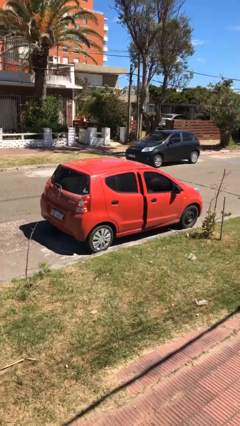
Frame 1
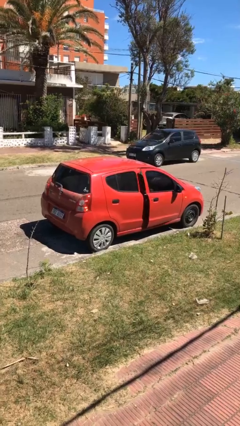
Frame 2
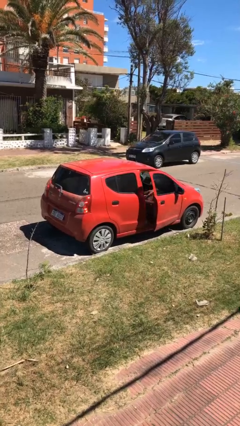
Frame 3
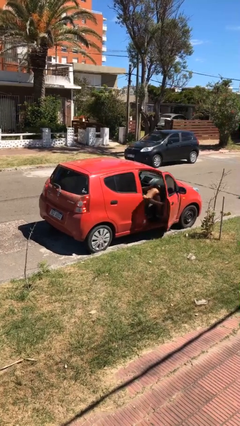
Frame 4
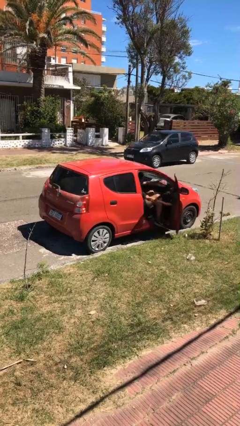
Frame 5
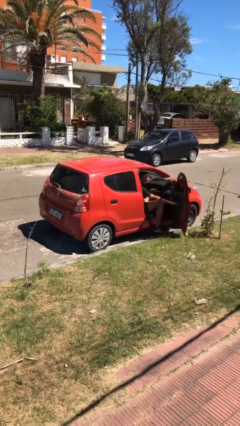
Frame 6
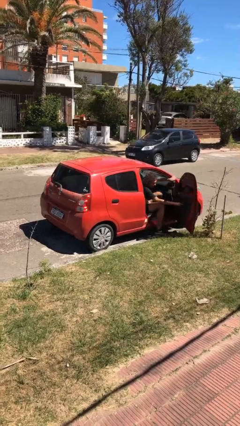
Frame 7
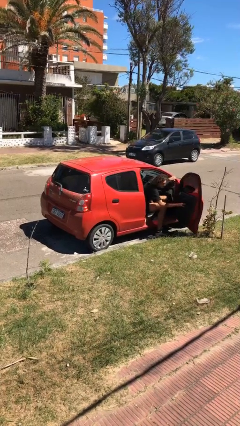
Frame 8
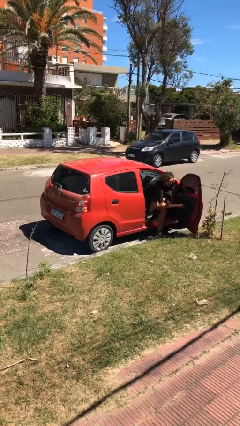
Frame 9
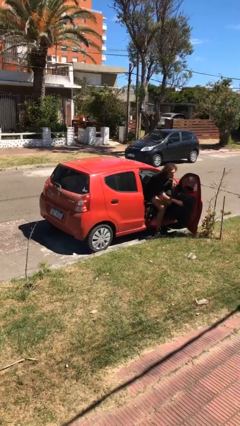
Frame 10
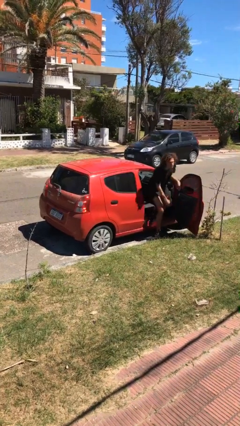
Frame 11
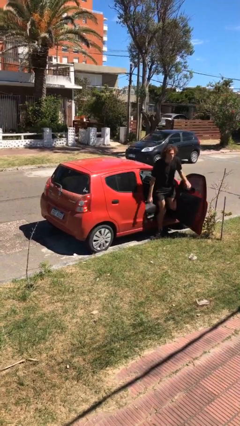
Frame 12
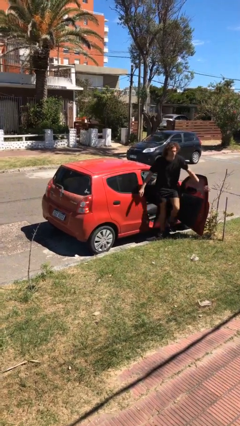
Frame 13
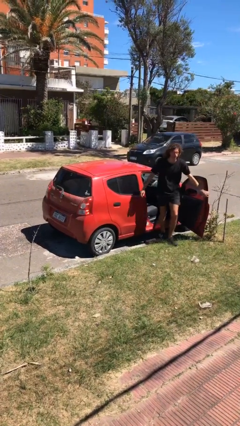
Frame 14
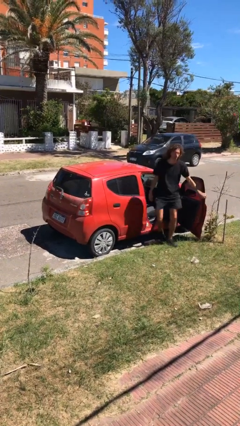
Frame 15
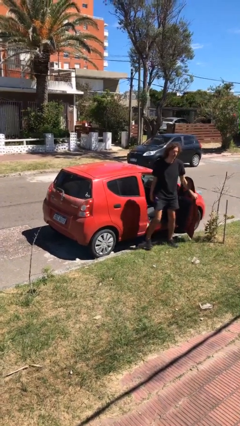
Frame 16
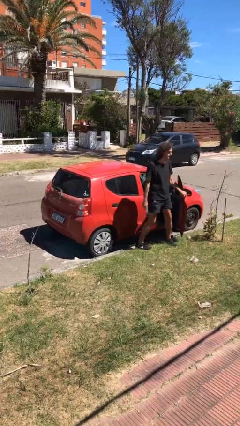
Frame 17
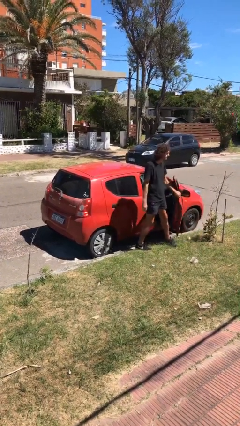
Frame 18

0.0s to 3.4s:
car drops off person

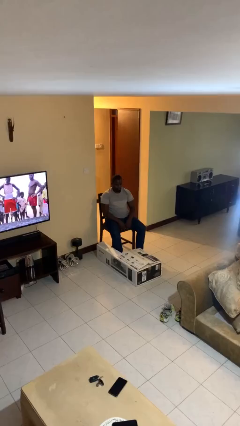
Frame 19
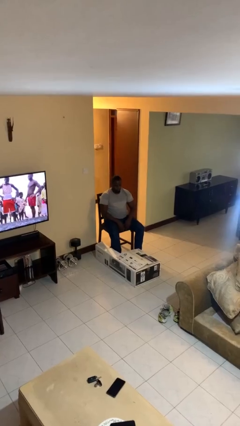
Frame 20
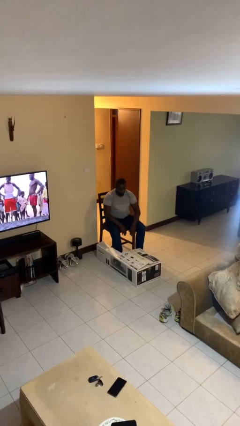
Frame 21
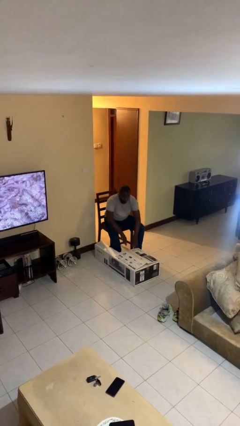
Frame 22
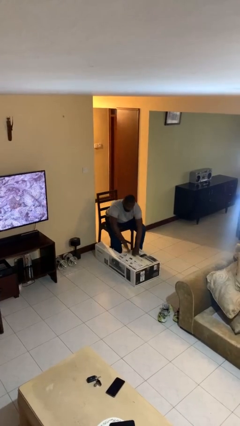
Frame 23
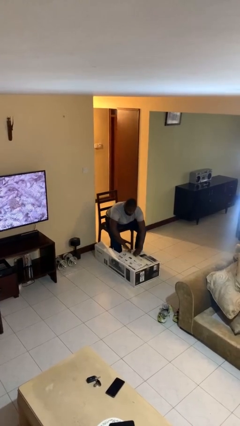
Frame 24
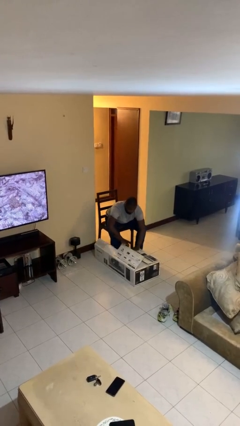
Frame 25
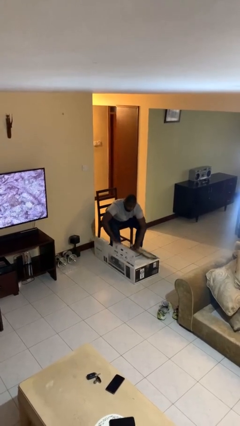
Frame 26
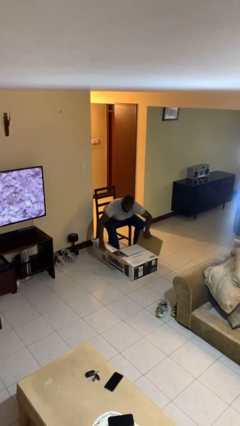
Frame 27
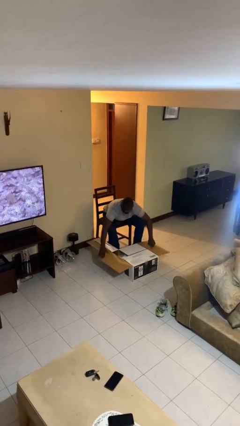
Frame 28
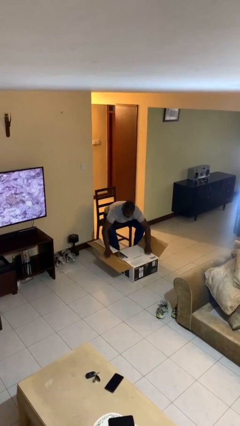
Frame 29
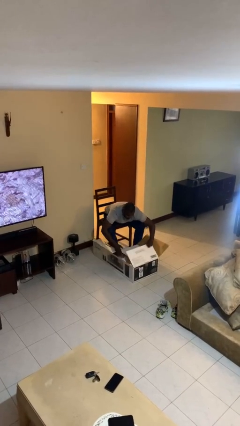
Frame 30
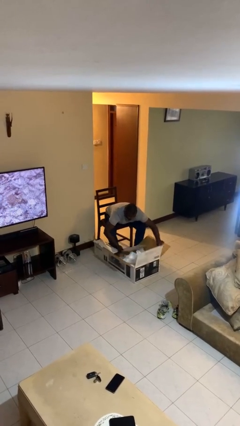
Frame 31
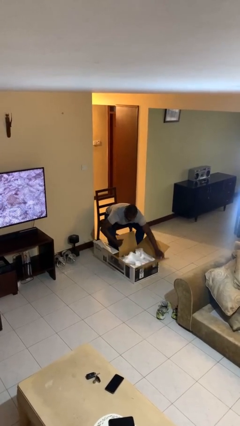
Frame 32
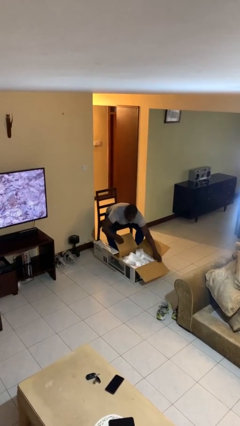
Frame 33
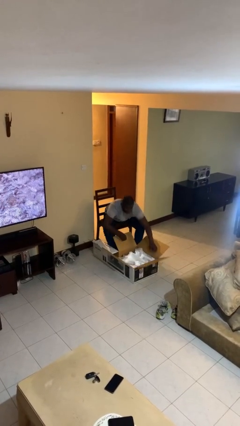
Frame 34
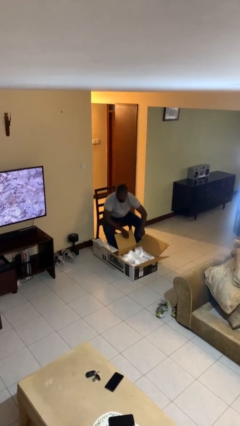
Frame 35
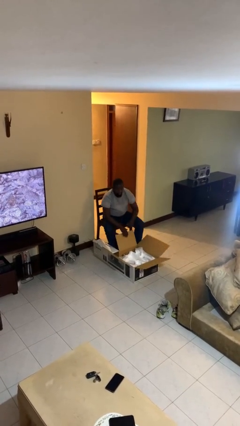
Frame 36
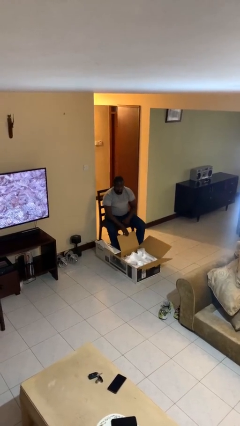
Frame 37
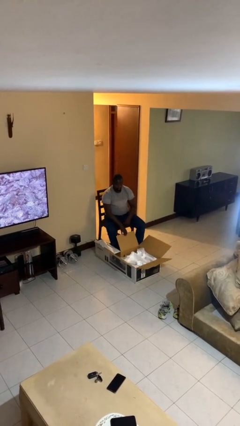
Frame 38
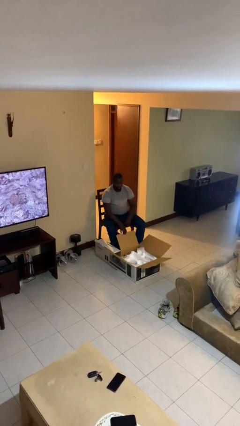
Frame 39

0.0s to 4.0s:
person opens box

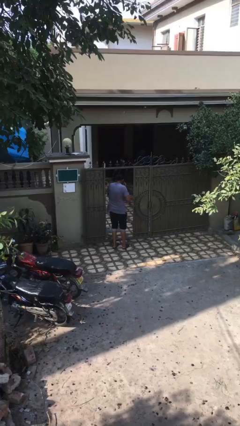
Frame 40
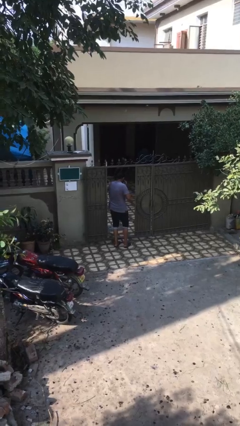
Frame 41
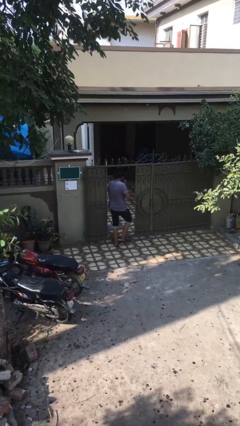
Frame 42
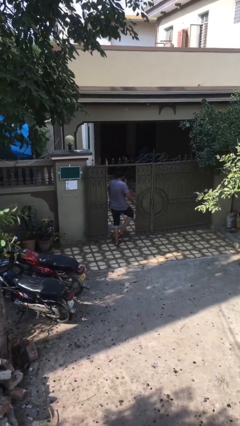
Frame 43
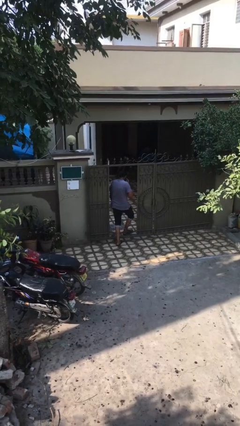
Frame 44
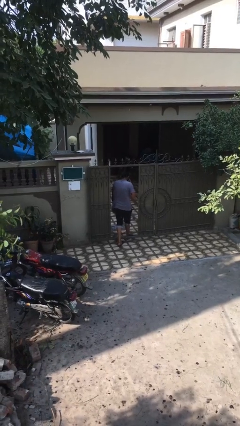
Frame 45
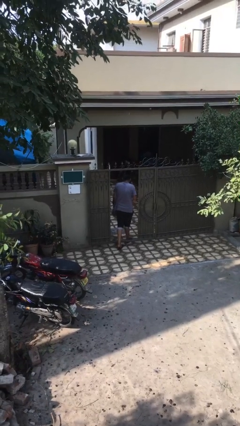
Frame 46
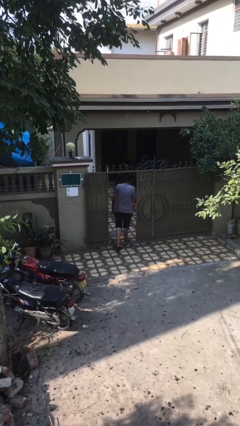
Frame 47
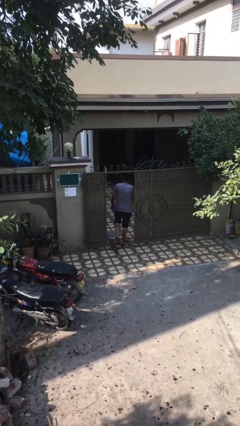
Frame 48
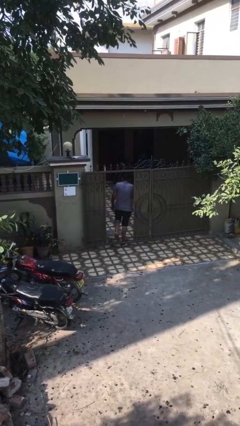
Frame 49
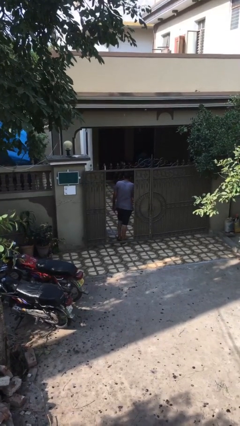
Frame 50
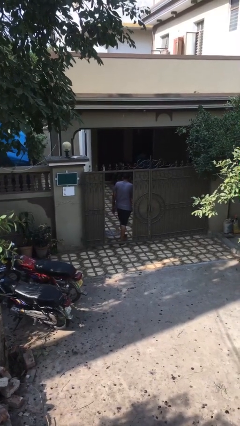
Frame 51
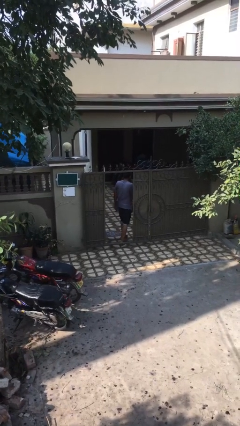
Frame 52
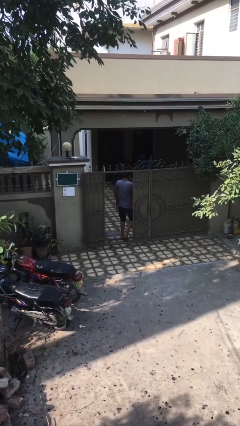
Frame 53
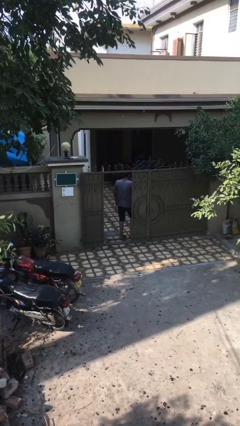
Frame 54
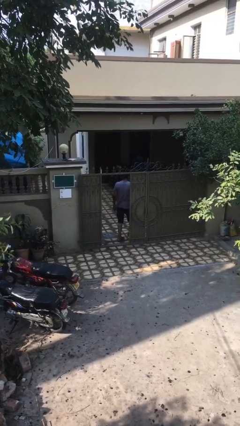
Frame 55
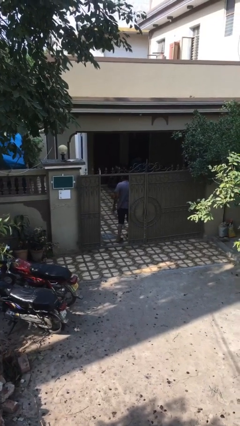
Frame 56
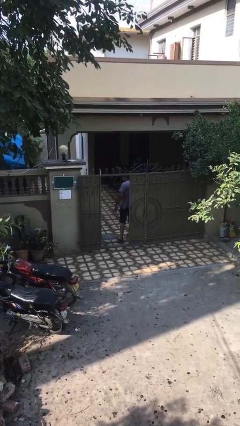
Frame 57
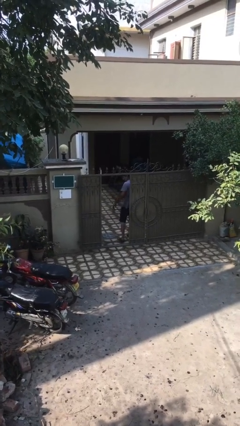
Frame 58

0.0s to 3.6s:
person exits scene through structure

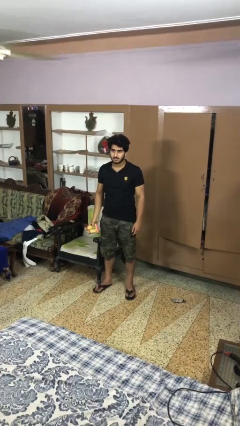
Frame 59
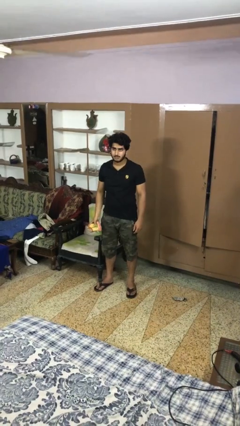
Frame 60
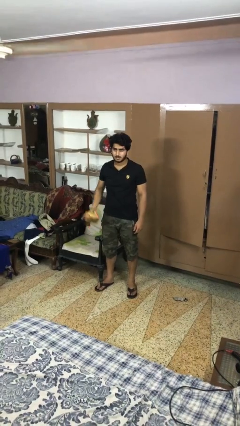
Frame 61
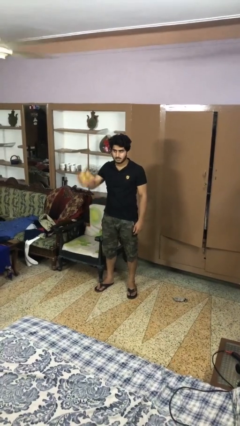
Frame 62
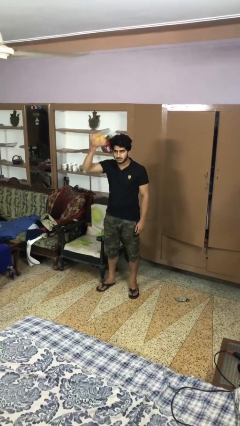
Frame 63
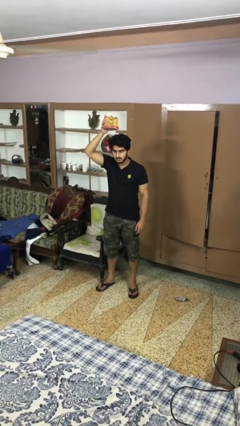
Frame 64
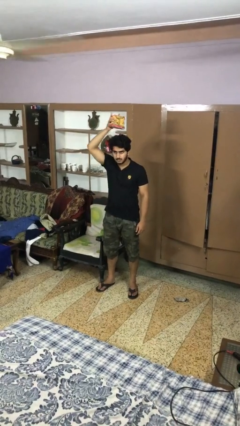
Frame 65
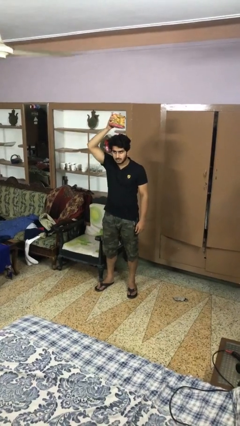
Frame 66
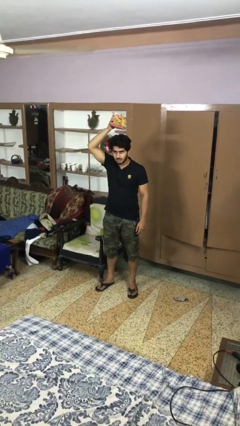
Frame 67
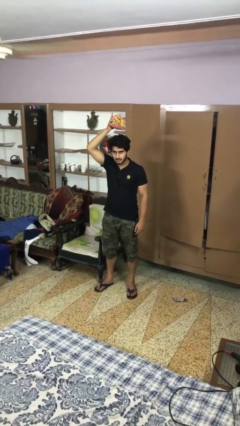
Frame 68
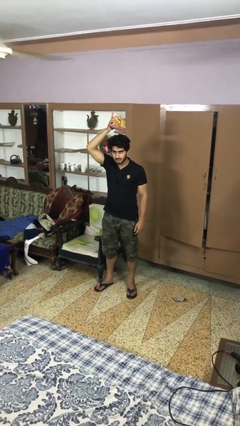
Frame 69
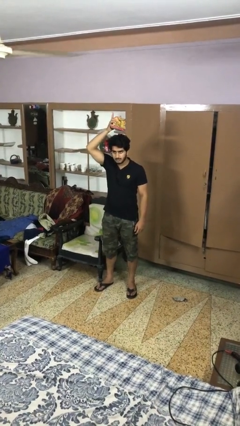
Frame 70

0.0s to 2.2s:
person holds object above head

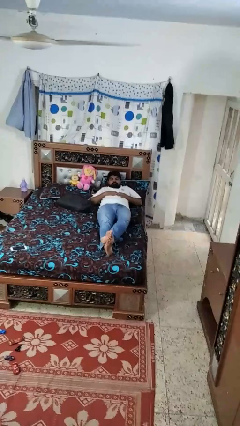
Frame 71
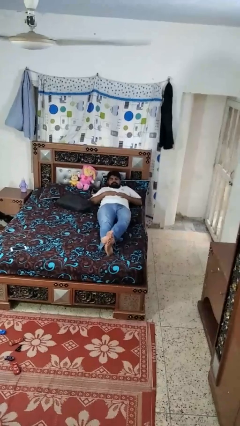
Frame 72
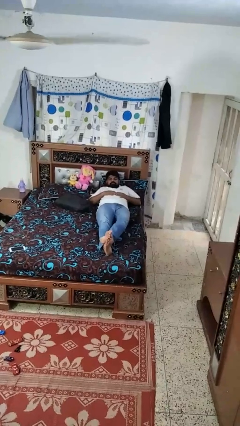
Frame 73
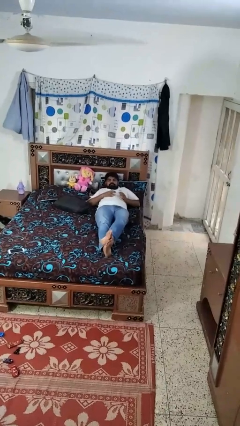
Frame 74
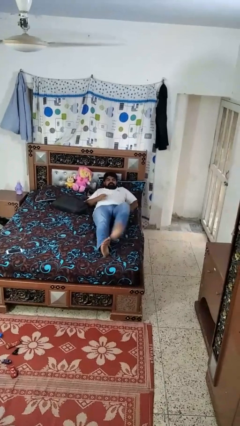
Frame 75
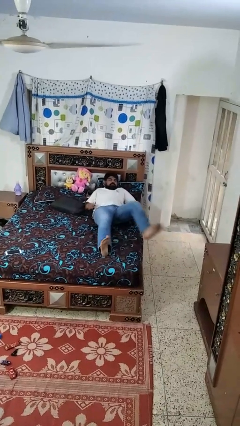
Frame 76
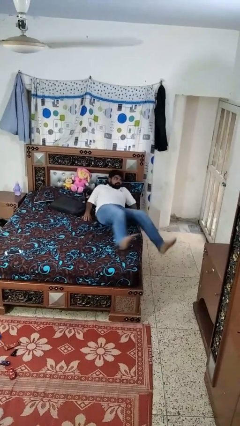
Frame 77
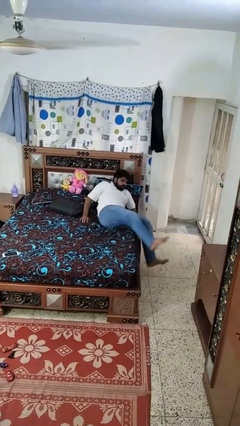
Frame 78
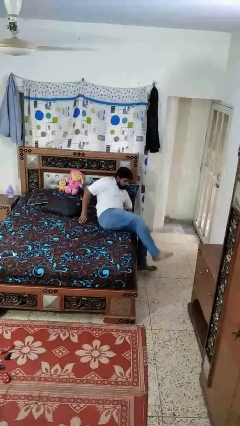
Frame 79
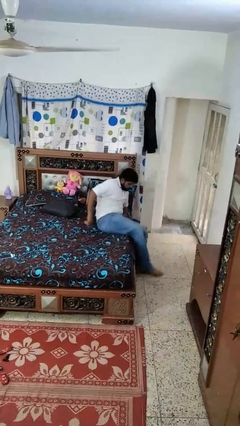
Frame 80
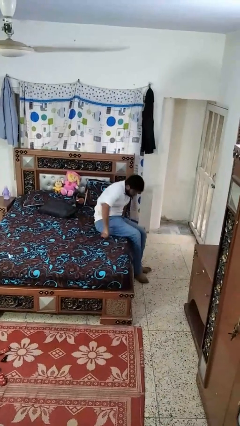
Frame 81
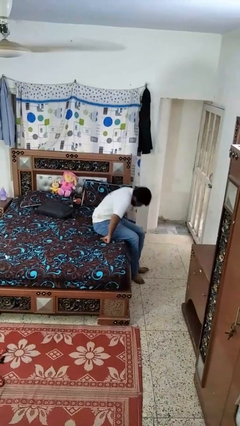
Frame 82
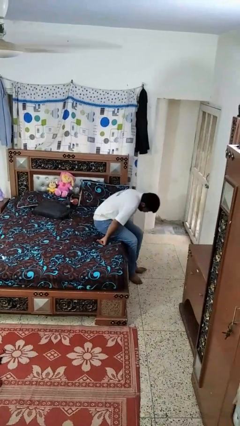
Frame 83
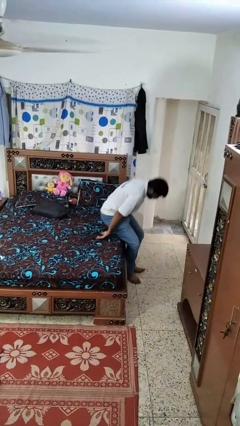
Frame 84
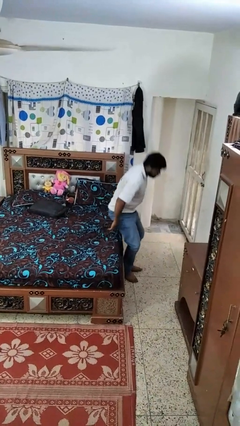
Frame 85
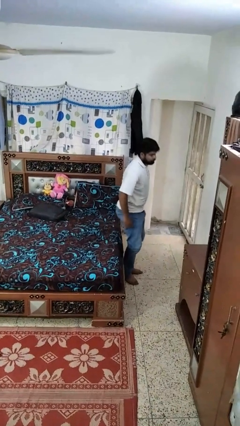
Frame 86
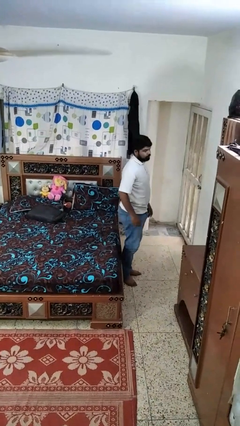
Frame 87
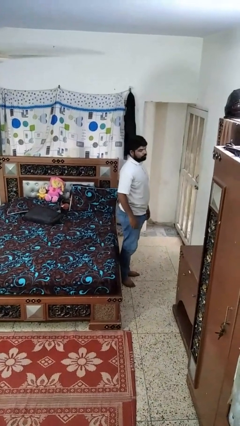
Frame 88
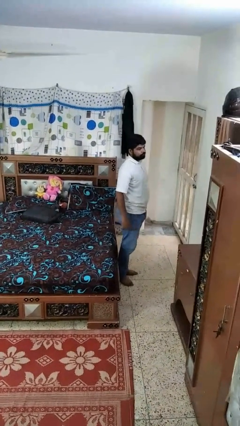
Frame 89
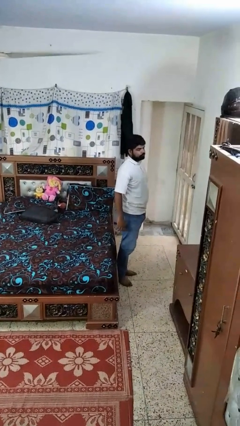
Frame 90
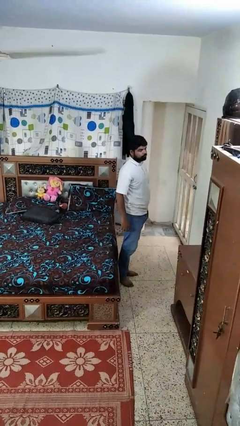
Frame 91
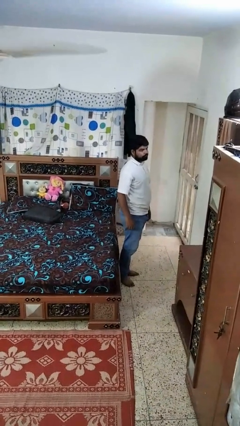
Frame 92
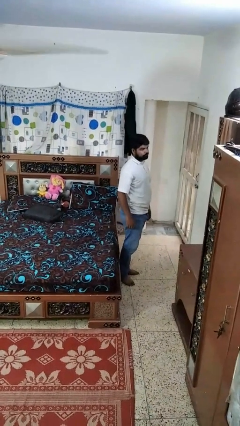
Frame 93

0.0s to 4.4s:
person stands up
